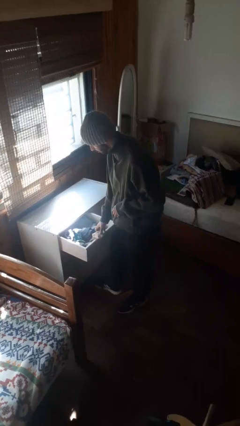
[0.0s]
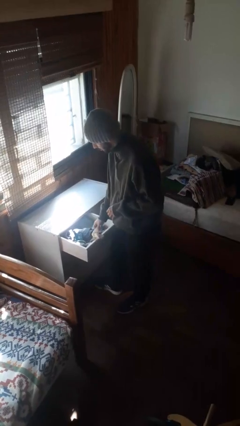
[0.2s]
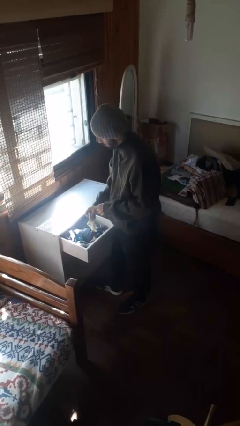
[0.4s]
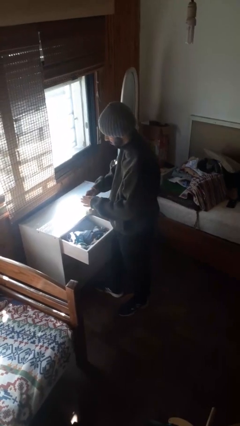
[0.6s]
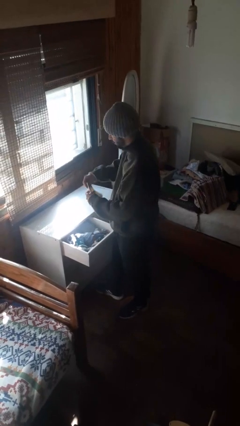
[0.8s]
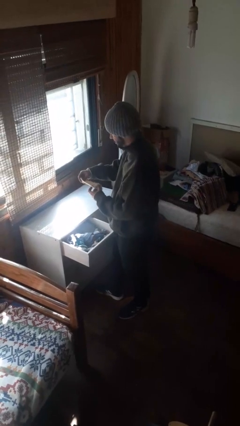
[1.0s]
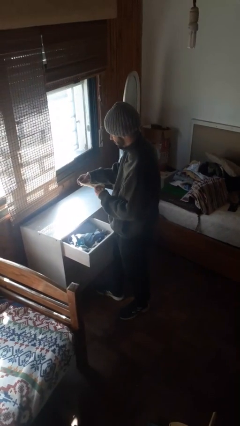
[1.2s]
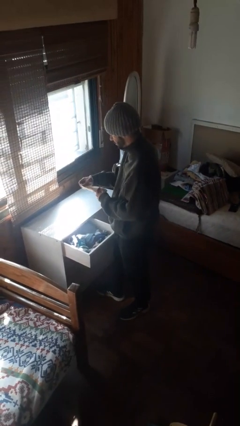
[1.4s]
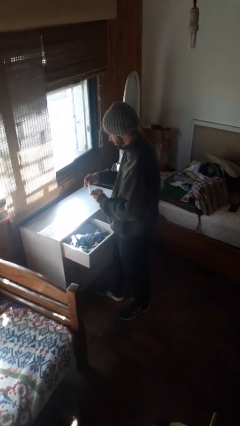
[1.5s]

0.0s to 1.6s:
person takes clothes from dresser

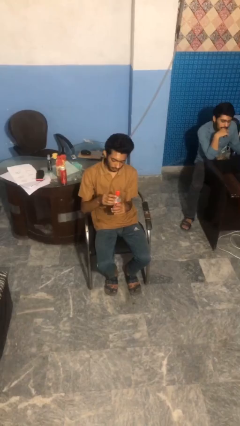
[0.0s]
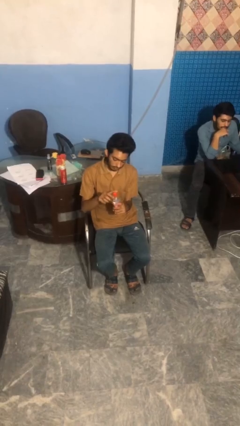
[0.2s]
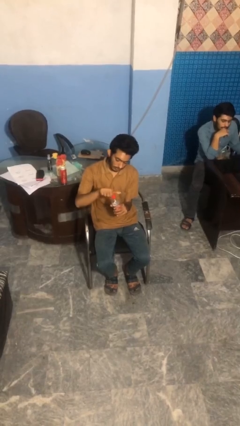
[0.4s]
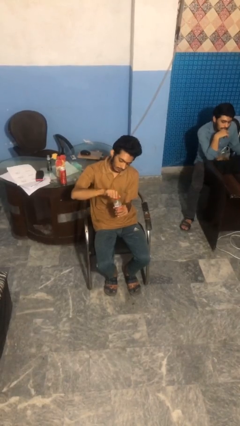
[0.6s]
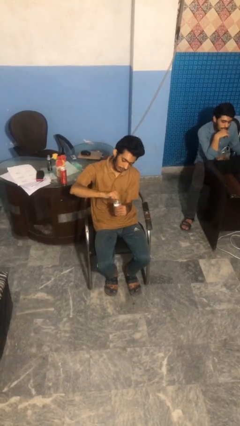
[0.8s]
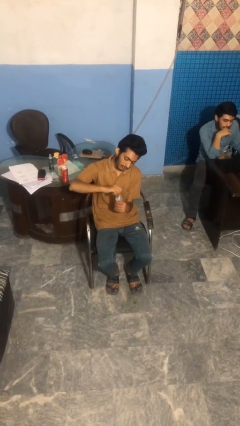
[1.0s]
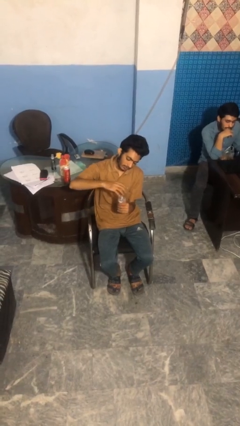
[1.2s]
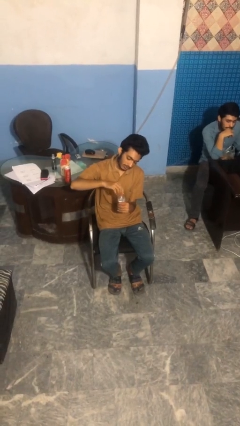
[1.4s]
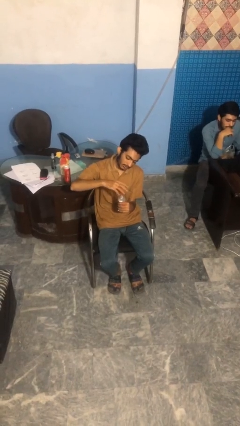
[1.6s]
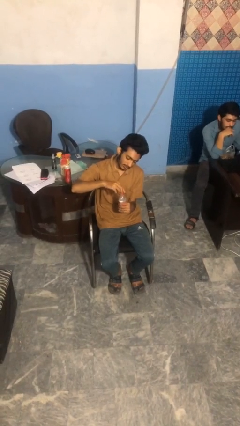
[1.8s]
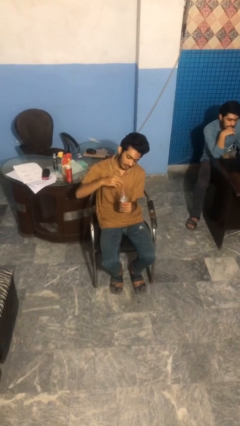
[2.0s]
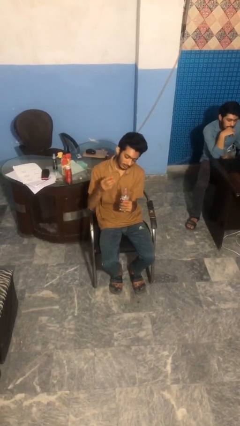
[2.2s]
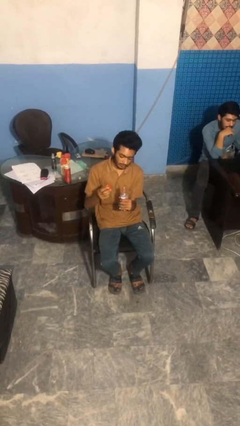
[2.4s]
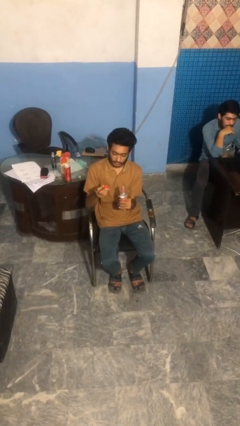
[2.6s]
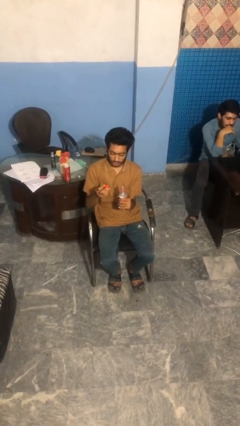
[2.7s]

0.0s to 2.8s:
person unscrews lid from bottle

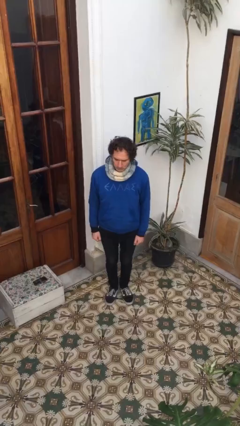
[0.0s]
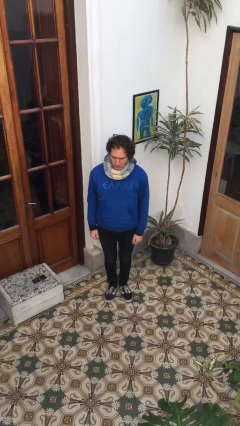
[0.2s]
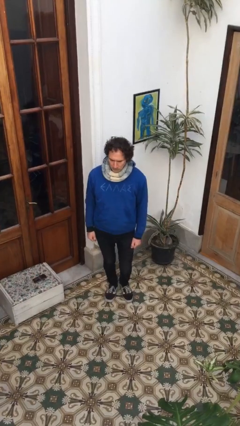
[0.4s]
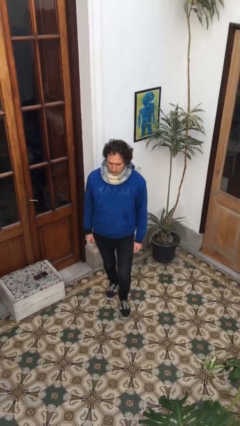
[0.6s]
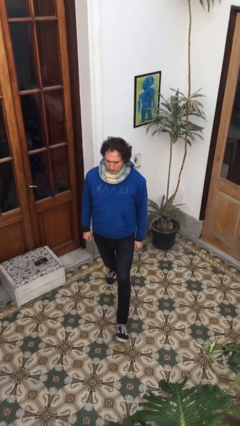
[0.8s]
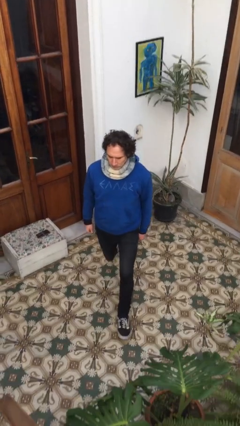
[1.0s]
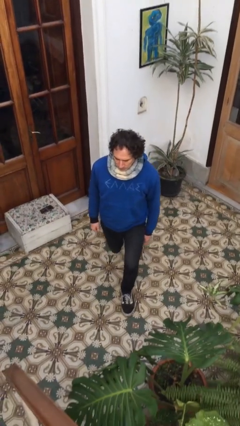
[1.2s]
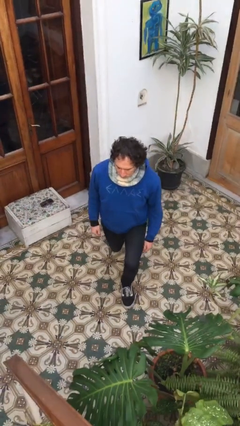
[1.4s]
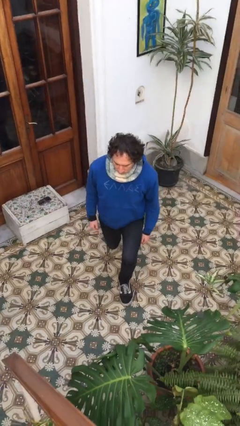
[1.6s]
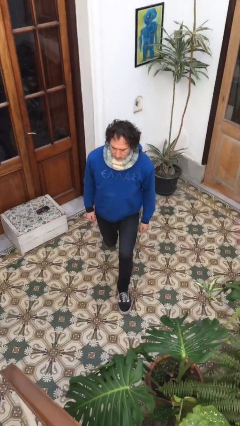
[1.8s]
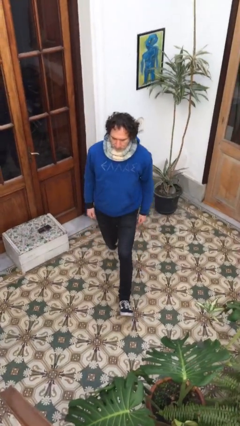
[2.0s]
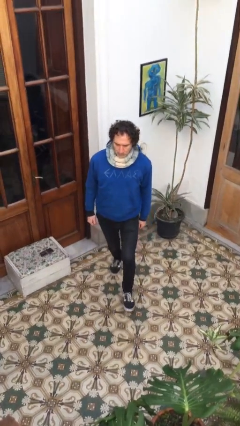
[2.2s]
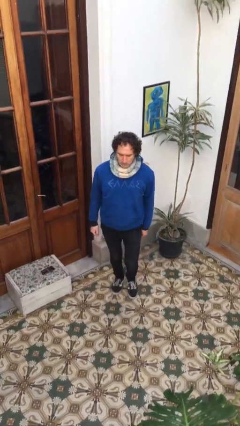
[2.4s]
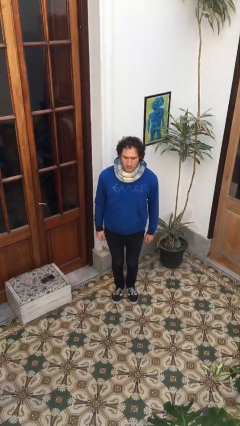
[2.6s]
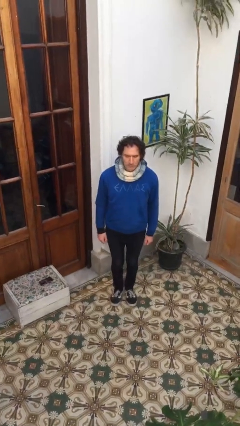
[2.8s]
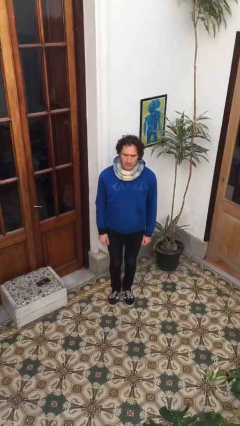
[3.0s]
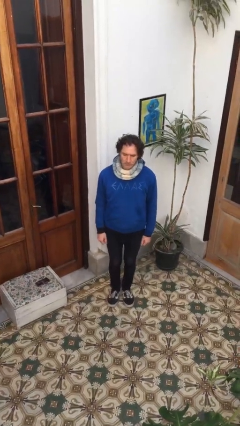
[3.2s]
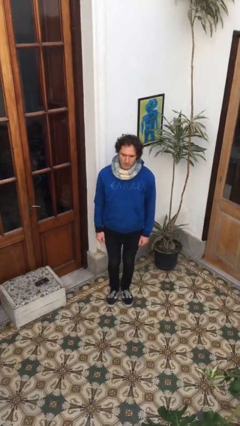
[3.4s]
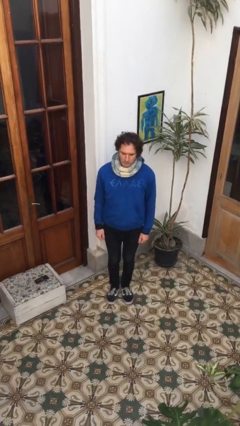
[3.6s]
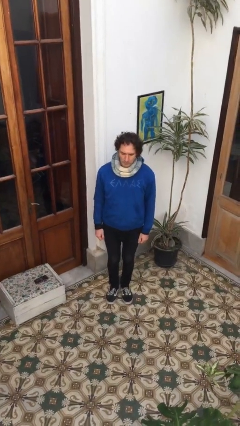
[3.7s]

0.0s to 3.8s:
person exercises with lunges

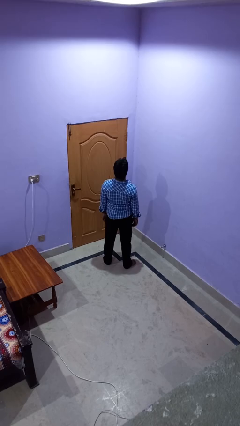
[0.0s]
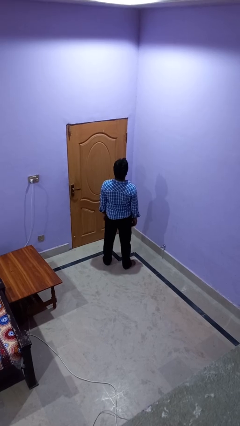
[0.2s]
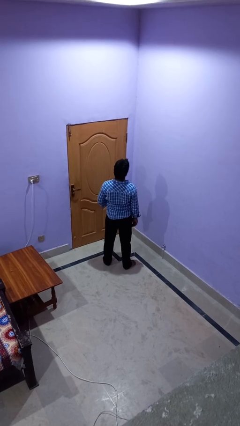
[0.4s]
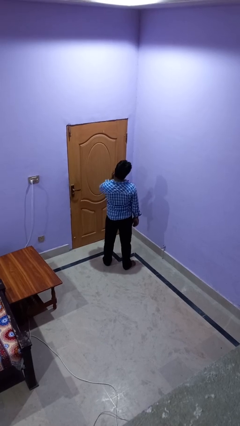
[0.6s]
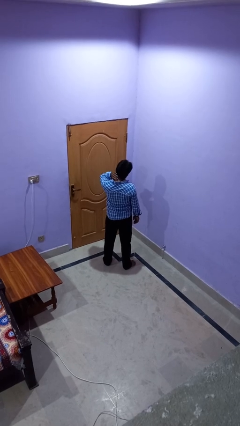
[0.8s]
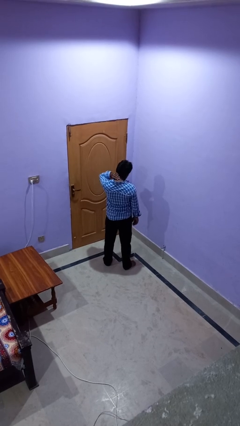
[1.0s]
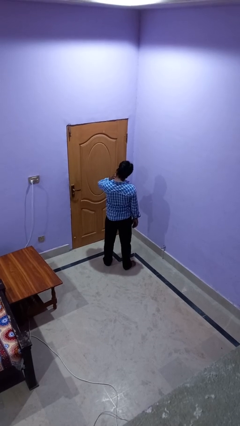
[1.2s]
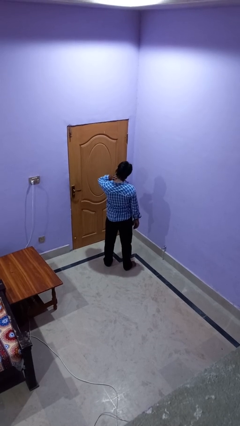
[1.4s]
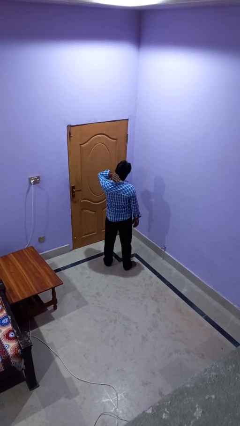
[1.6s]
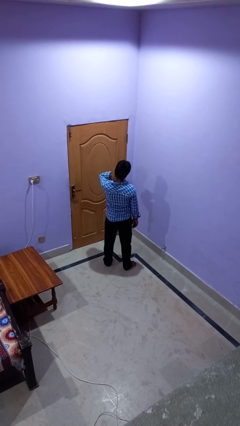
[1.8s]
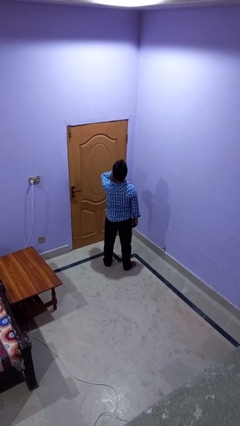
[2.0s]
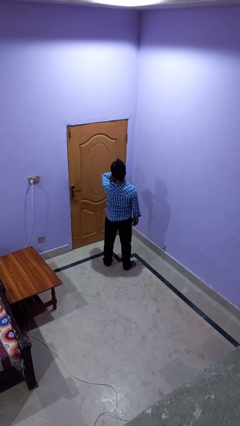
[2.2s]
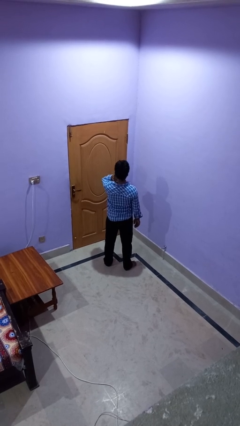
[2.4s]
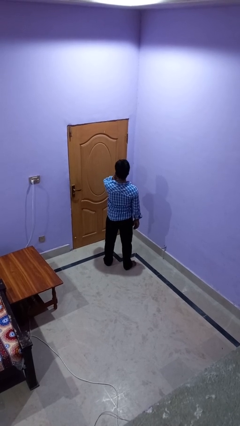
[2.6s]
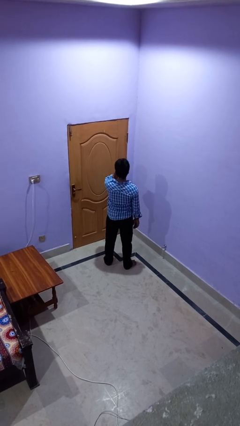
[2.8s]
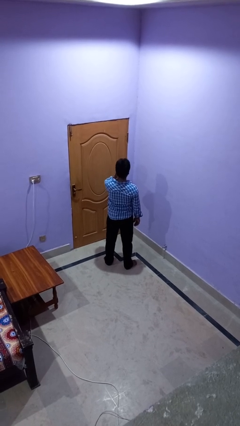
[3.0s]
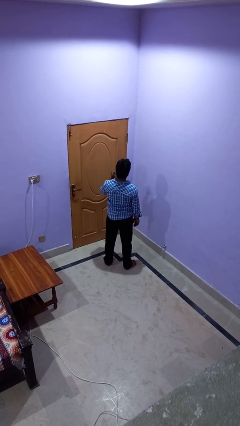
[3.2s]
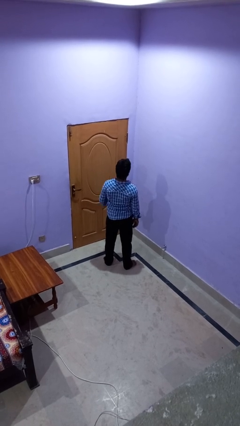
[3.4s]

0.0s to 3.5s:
person rubs neck

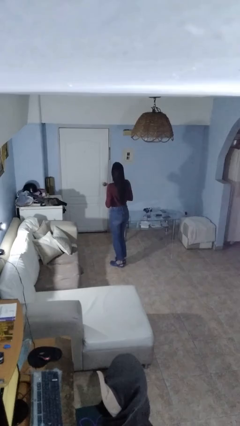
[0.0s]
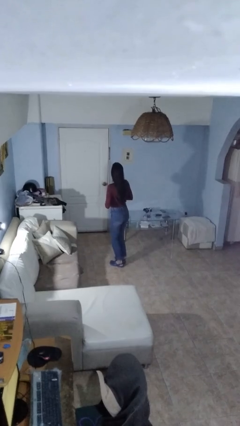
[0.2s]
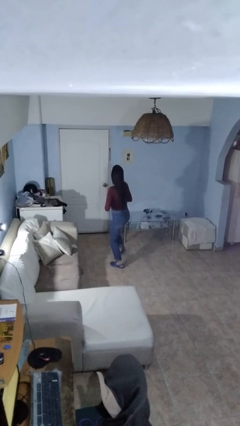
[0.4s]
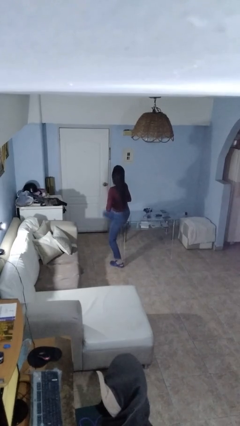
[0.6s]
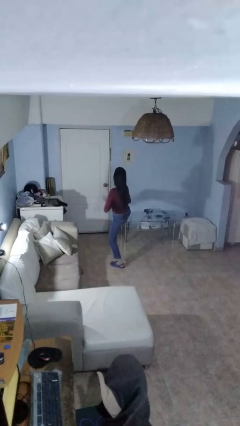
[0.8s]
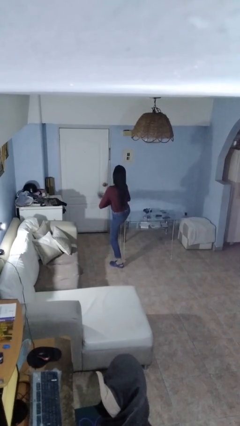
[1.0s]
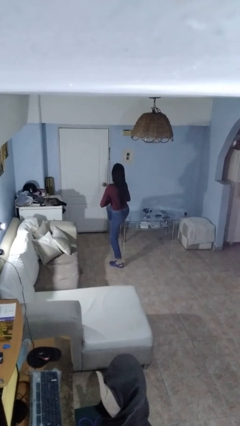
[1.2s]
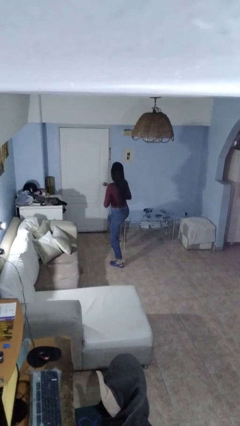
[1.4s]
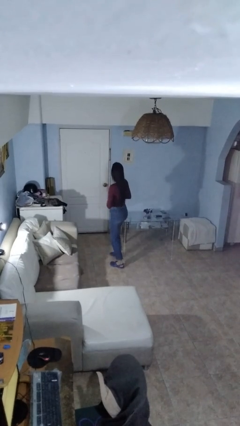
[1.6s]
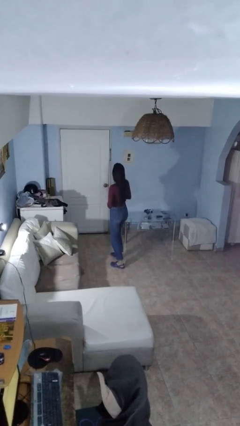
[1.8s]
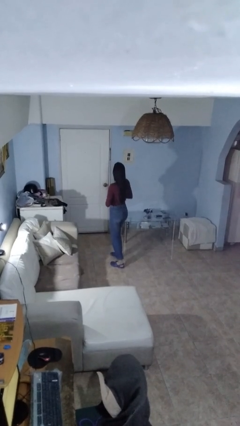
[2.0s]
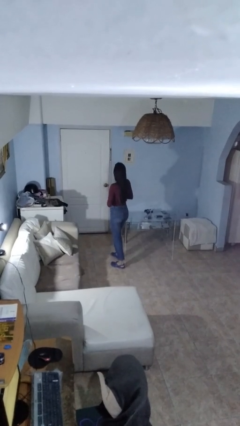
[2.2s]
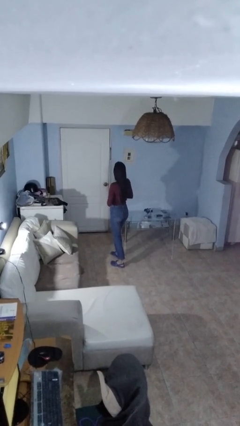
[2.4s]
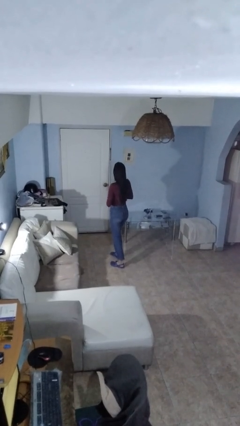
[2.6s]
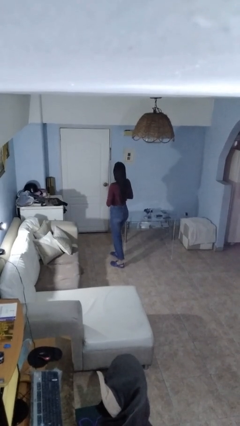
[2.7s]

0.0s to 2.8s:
person karate kicks

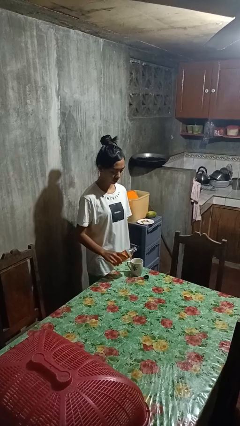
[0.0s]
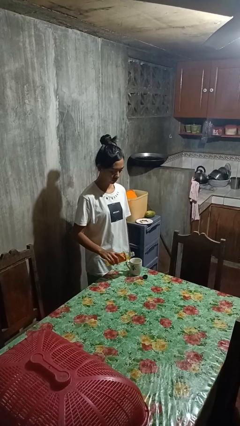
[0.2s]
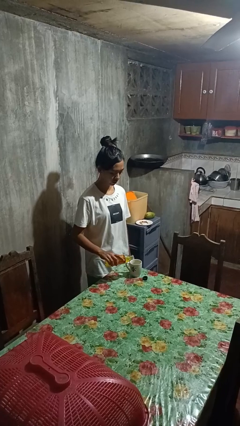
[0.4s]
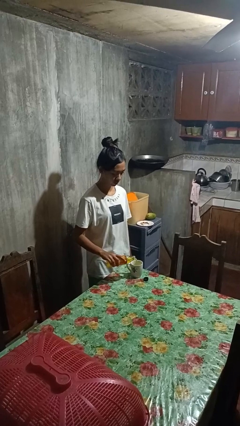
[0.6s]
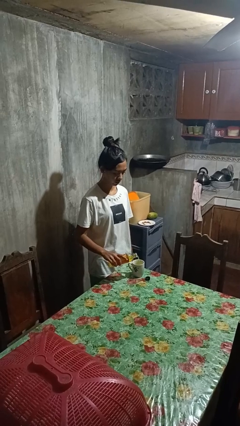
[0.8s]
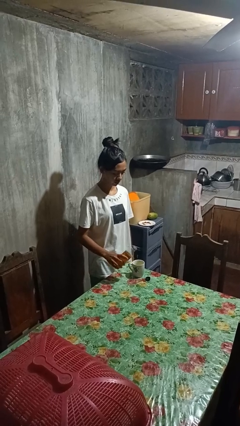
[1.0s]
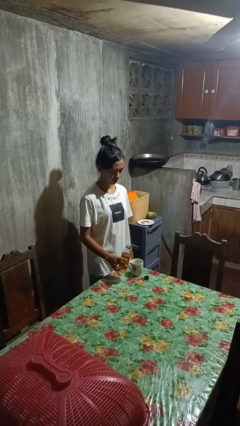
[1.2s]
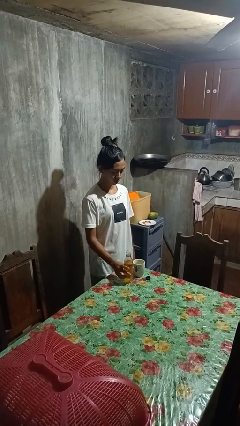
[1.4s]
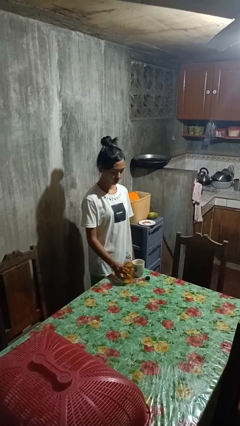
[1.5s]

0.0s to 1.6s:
person pours liquid into cup

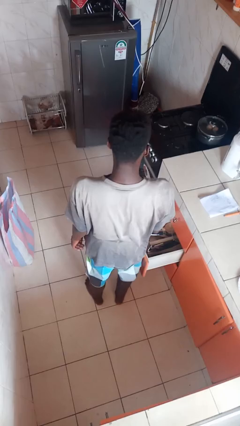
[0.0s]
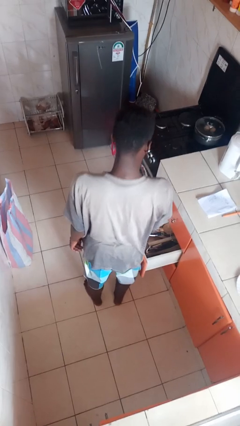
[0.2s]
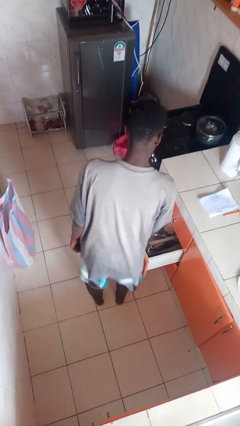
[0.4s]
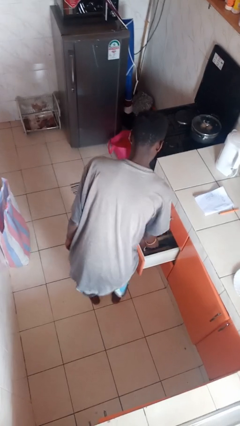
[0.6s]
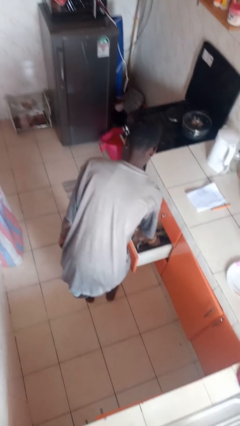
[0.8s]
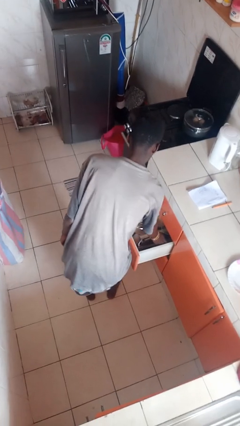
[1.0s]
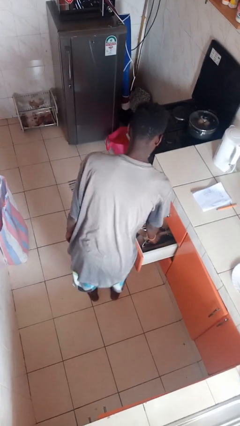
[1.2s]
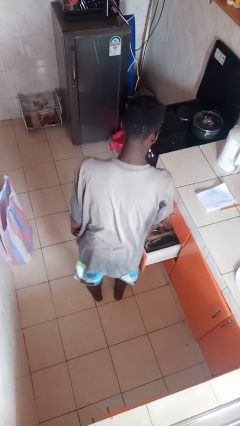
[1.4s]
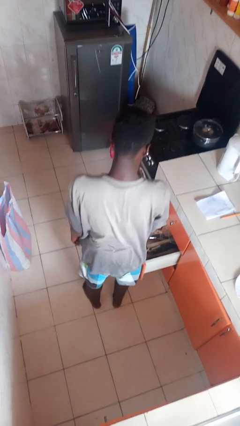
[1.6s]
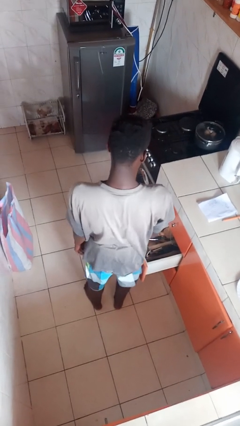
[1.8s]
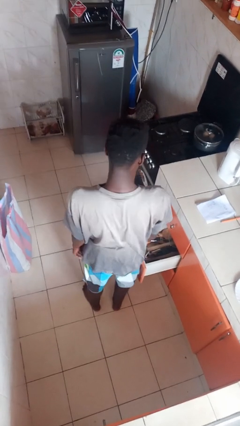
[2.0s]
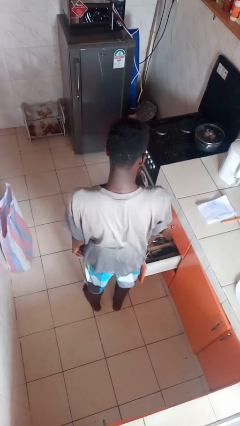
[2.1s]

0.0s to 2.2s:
person puts object into kitchen drawer
